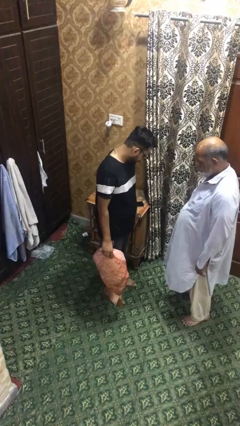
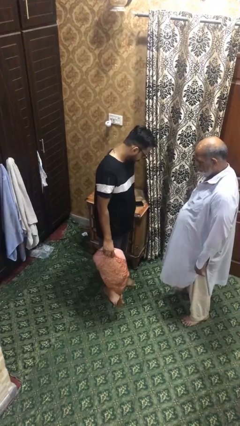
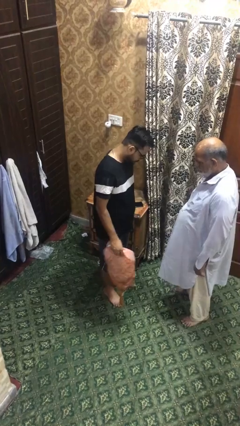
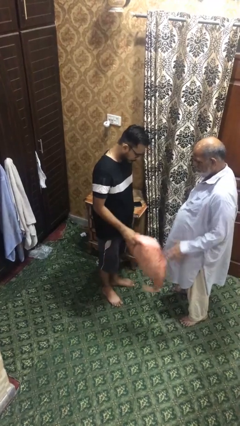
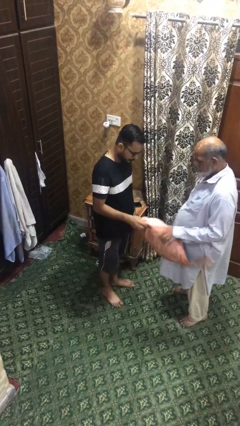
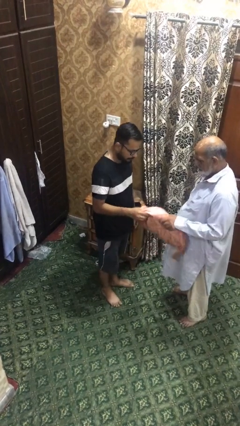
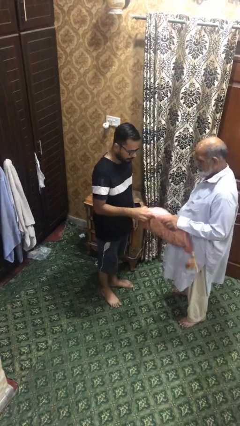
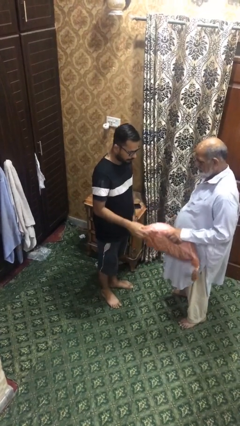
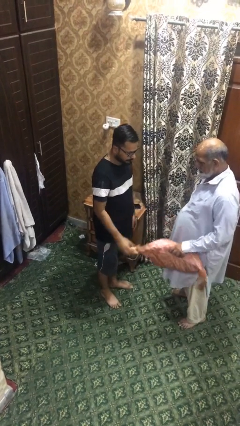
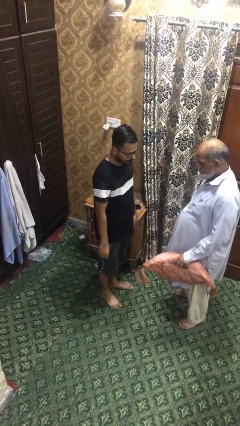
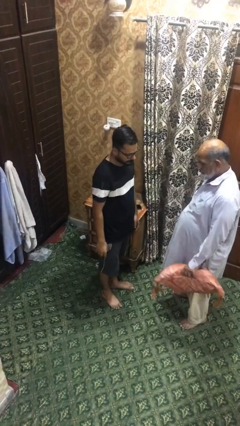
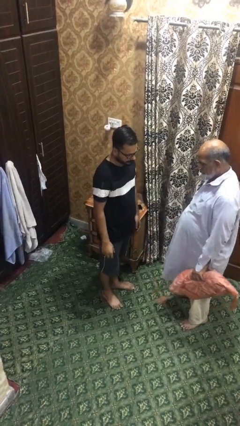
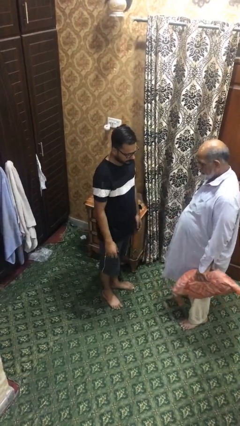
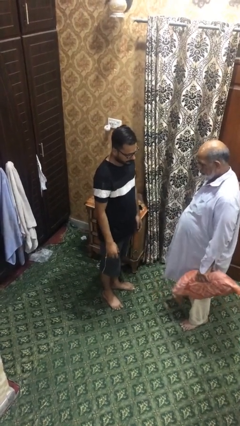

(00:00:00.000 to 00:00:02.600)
person transfers object to person

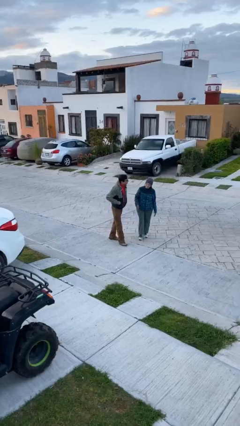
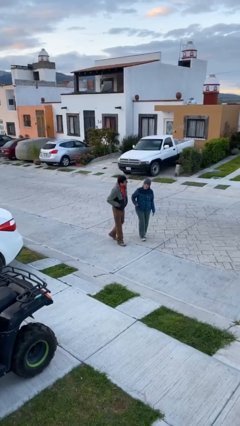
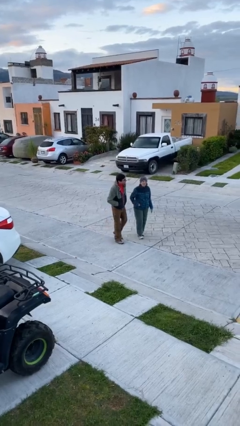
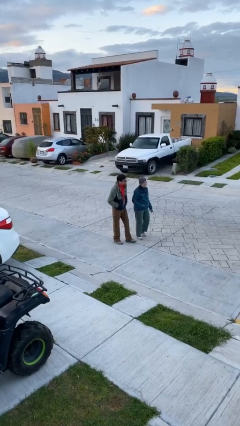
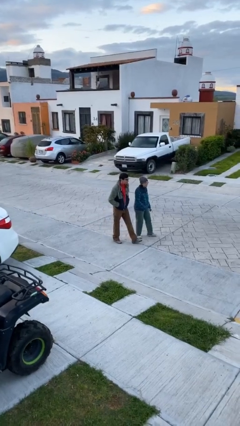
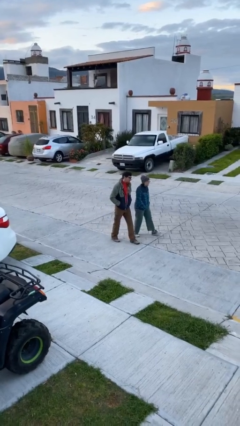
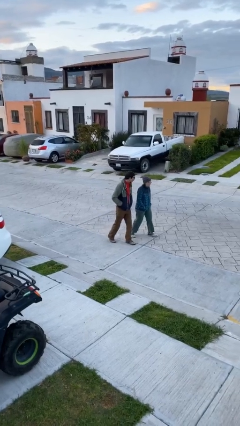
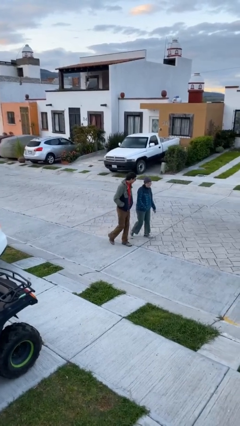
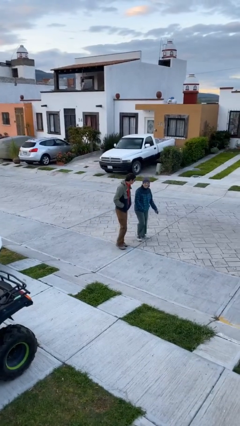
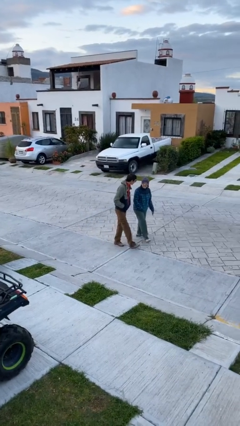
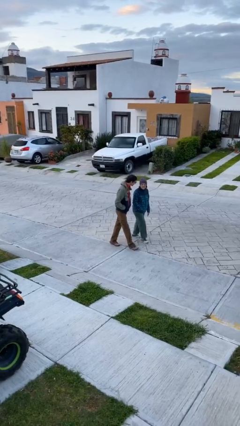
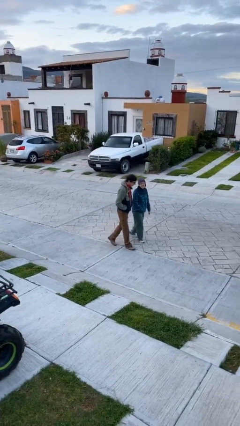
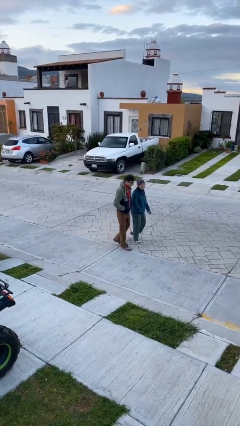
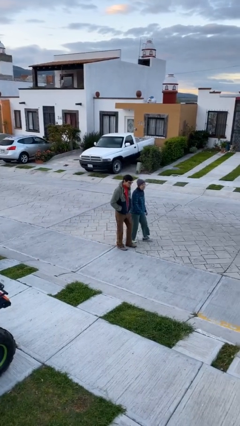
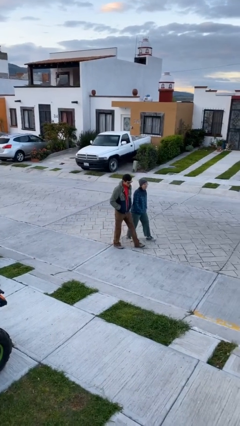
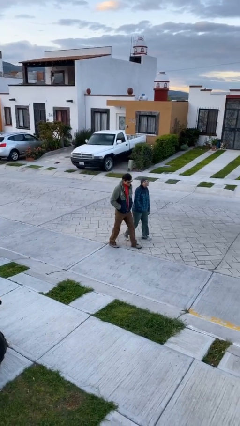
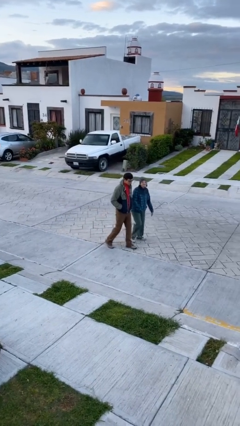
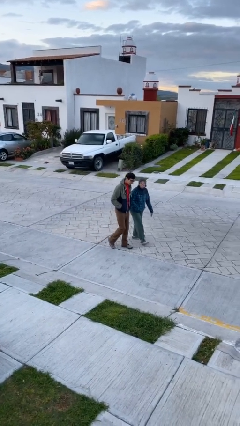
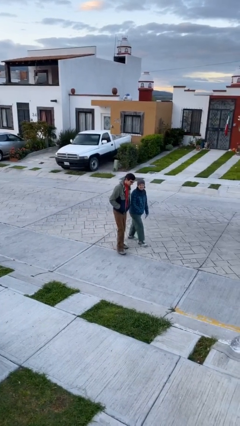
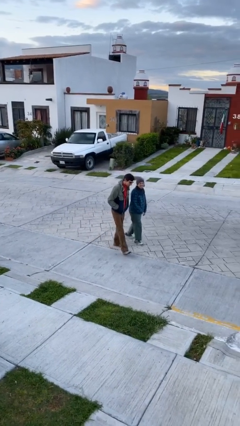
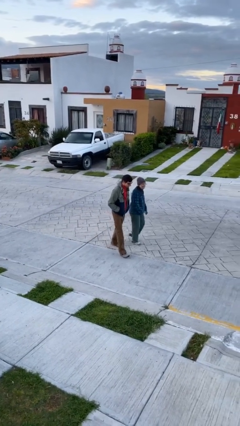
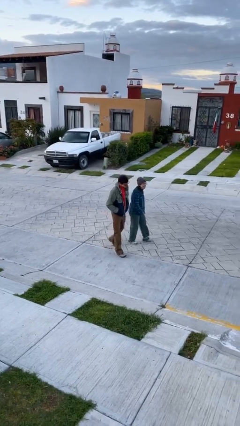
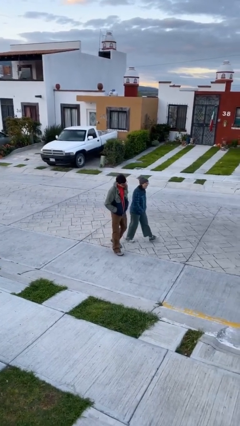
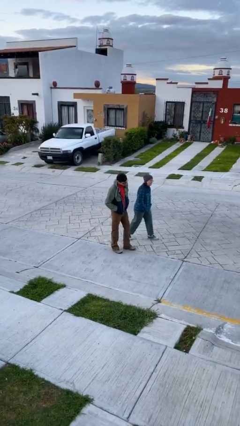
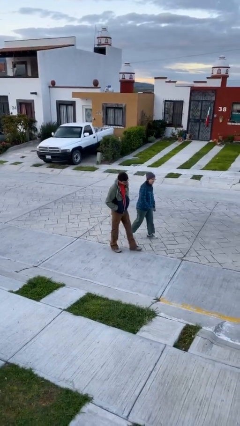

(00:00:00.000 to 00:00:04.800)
person talks to person

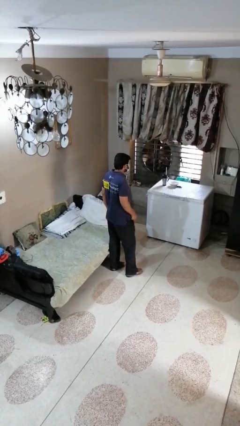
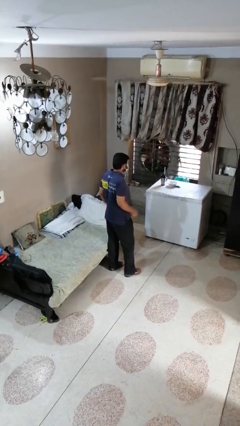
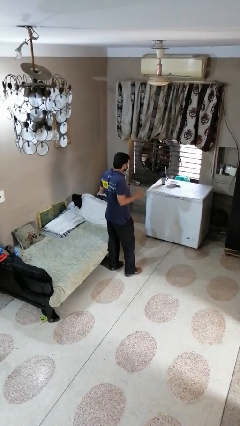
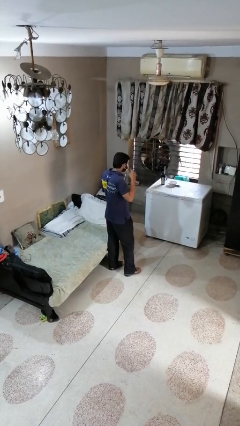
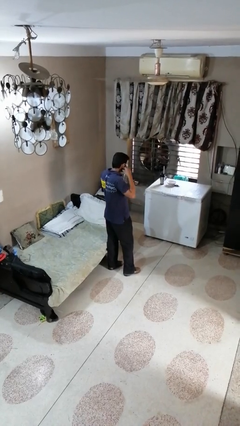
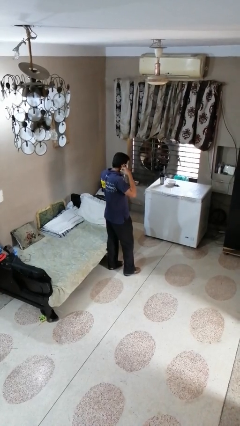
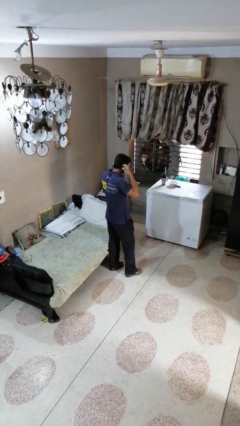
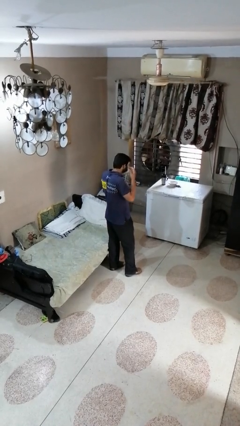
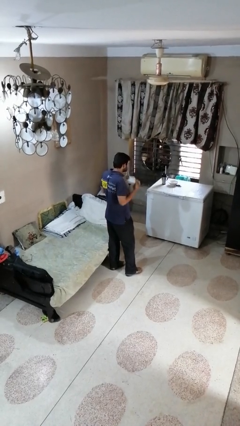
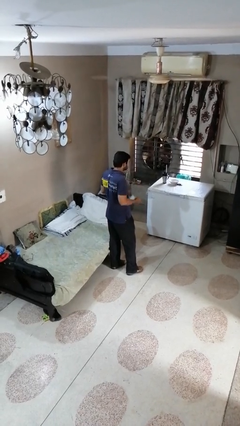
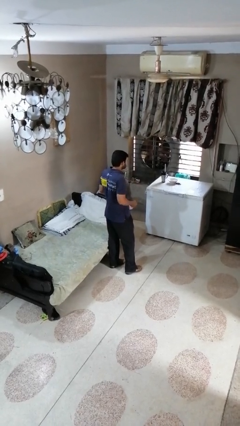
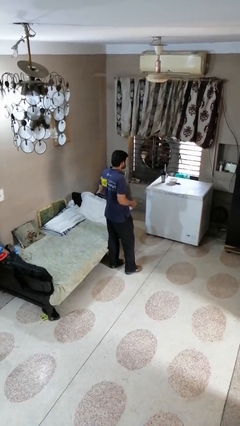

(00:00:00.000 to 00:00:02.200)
person takes off facemask

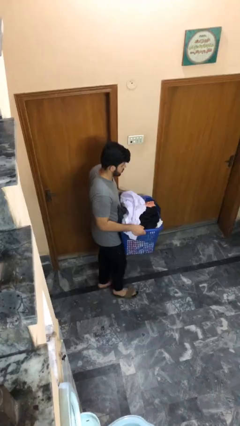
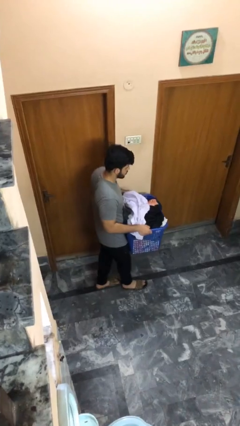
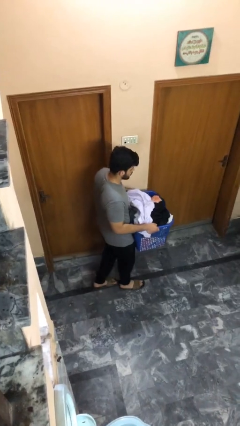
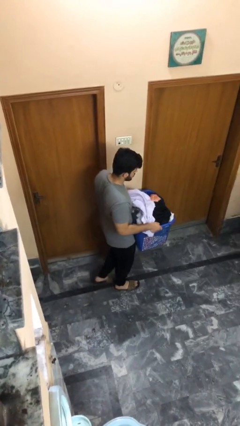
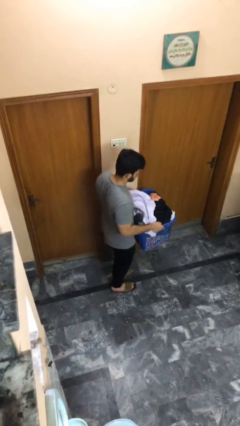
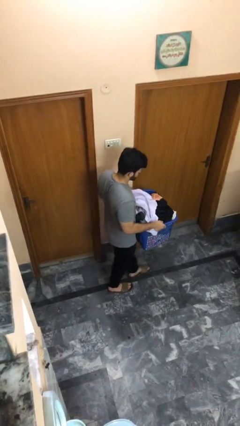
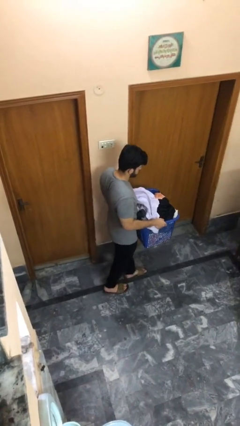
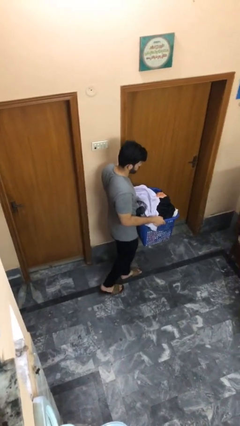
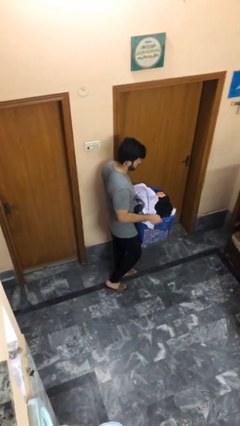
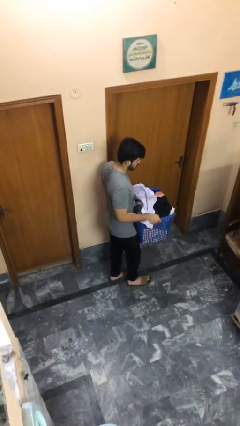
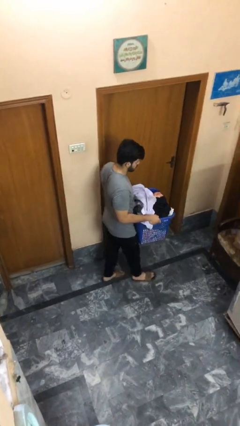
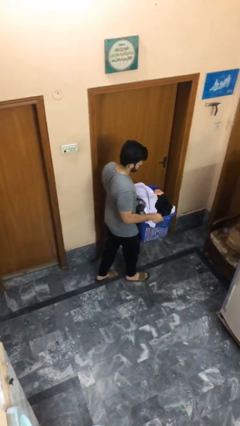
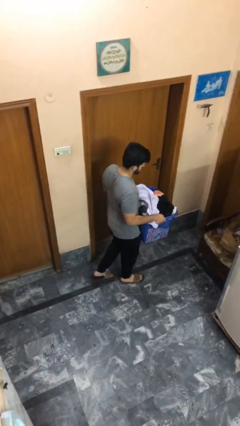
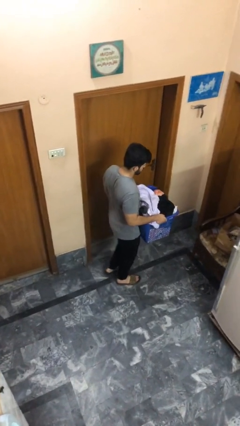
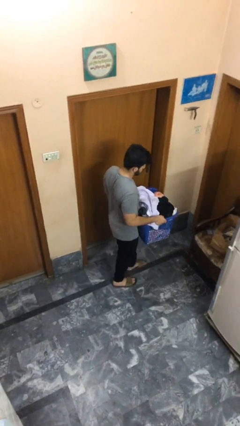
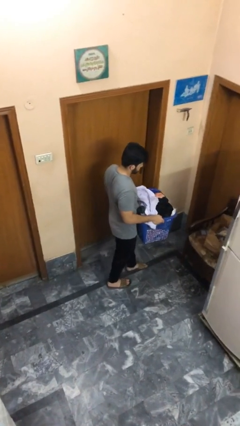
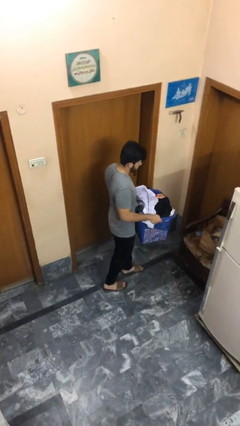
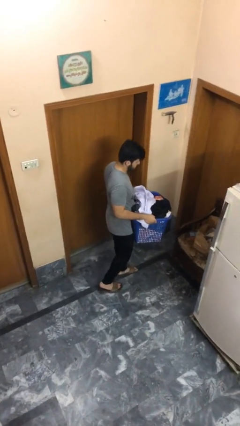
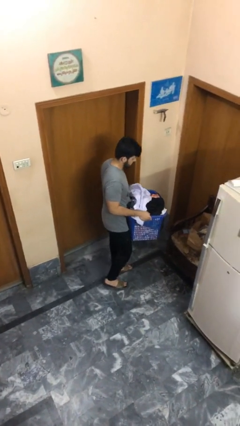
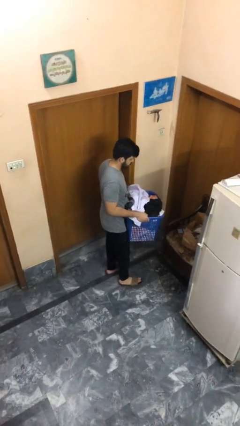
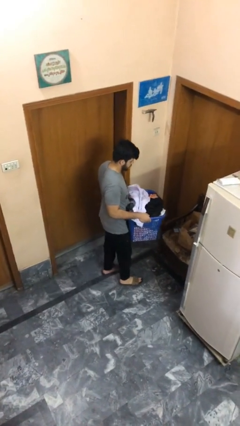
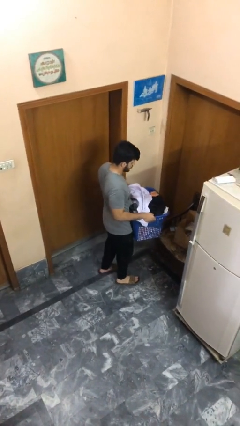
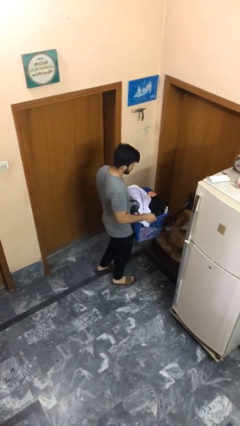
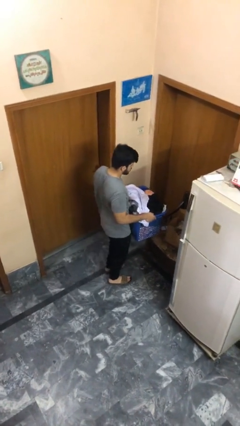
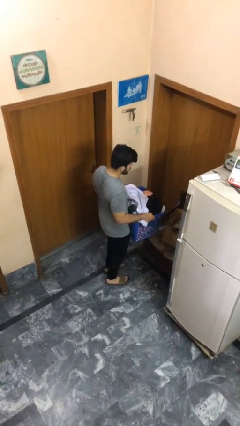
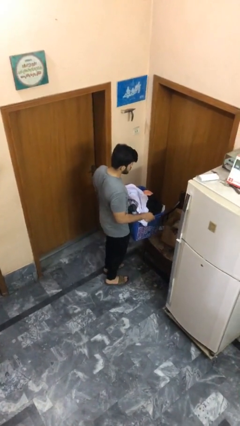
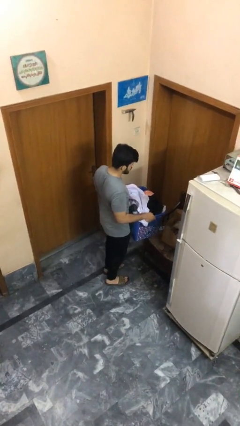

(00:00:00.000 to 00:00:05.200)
person carries laundry basket

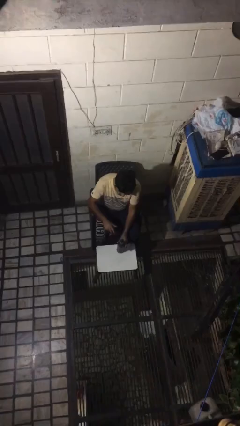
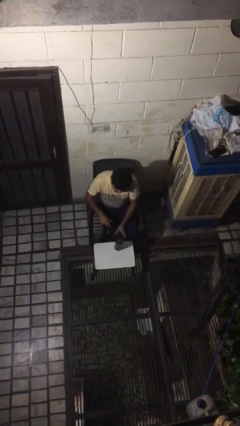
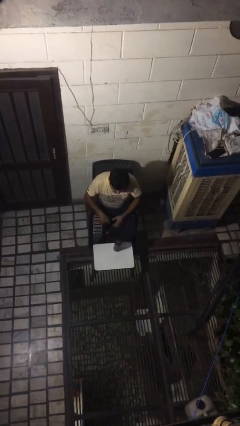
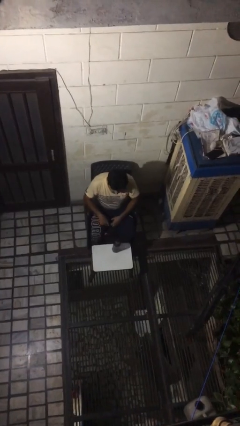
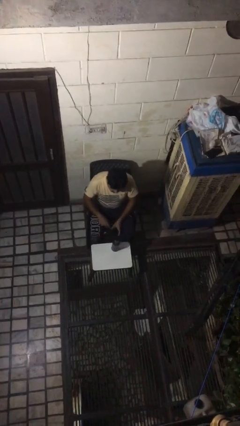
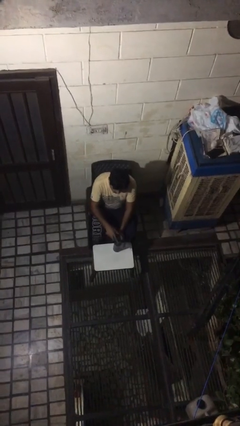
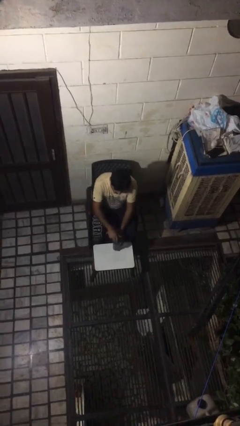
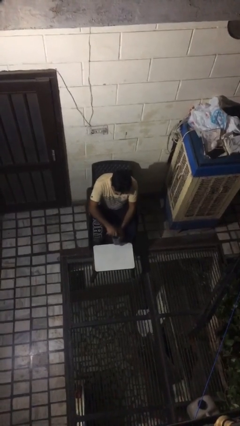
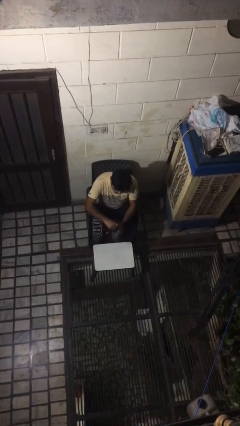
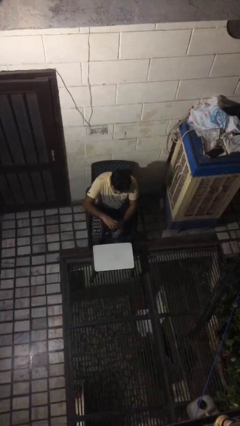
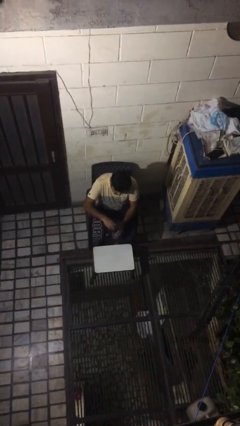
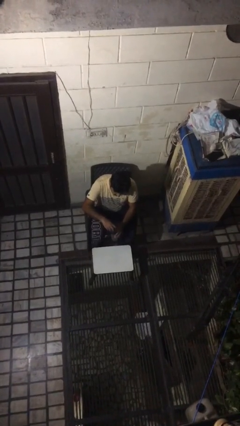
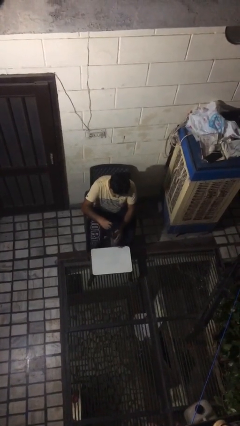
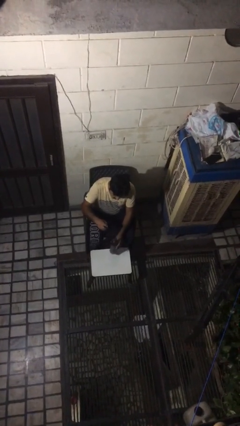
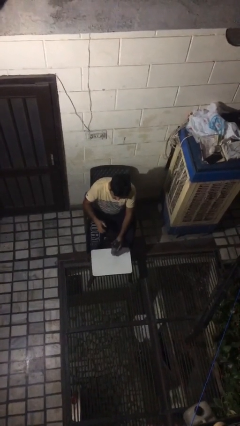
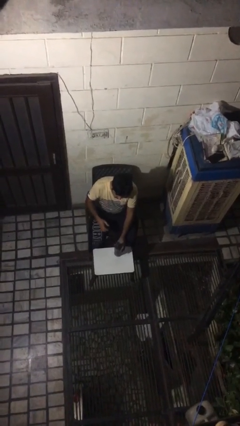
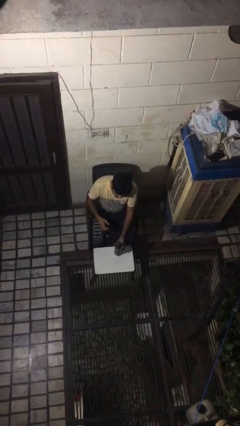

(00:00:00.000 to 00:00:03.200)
person unscrews lid from bottle
